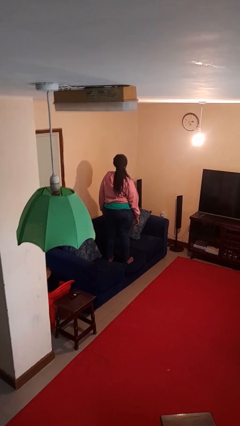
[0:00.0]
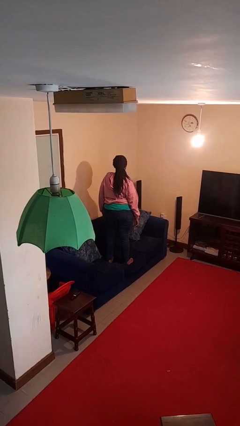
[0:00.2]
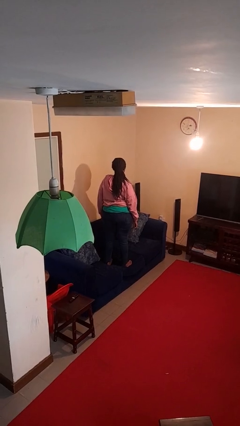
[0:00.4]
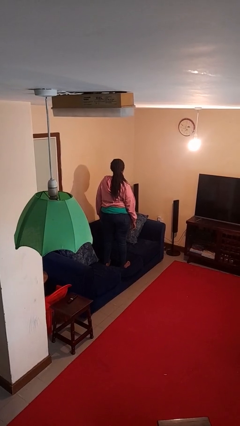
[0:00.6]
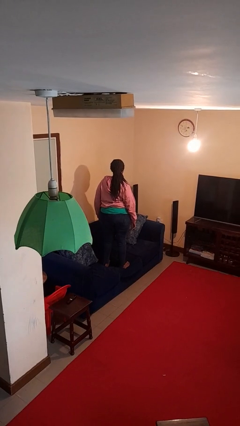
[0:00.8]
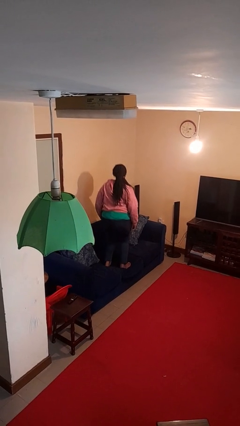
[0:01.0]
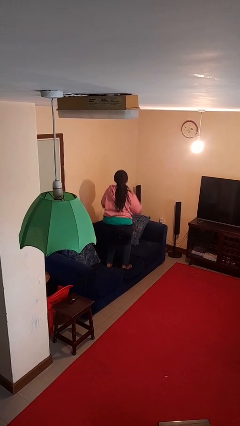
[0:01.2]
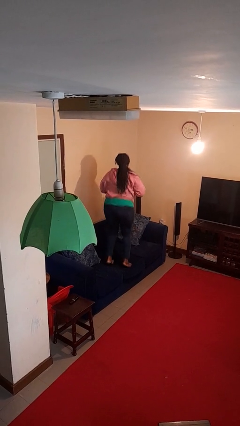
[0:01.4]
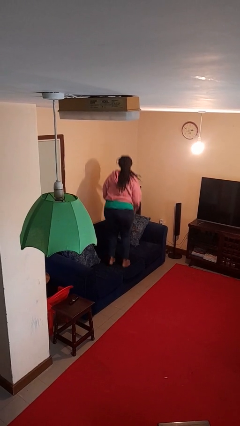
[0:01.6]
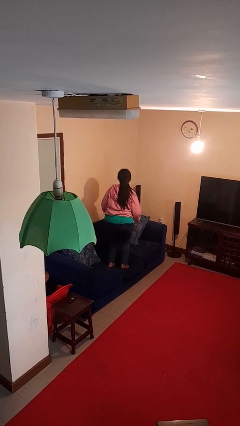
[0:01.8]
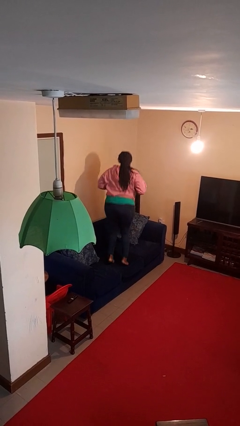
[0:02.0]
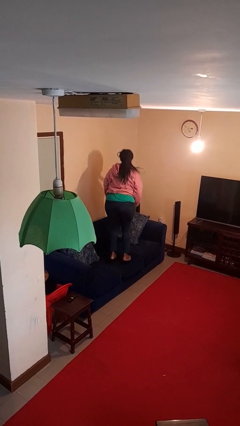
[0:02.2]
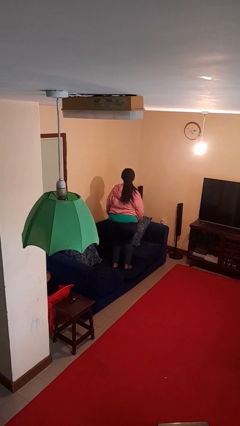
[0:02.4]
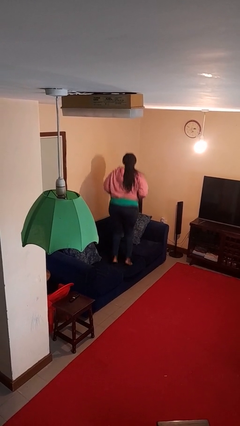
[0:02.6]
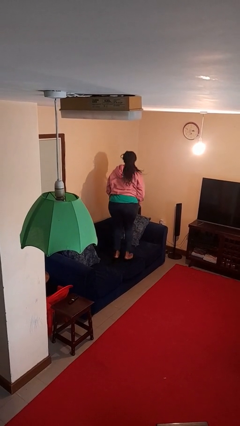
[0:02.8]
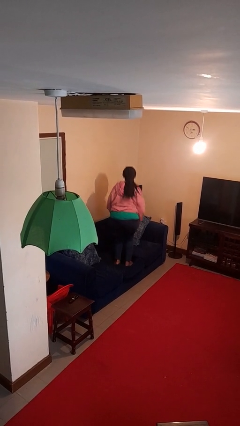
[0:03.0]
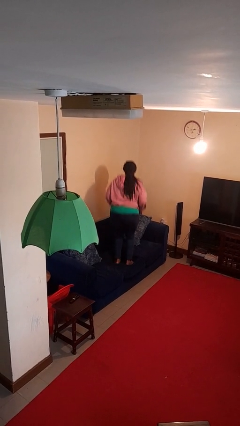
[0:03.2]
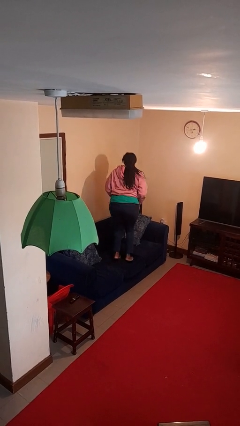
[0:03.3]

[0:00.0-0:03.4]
person jumps on couch

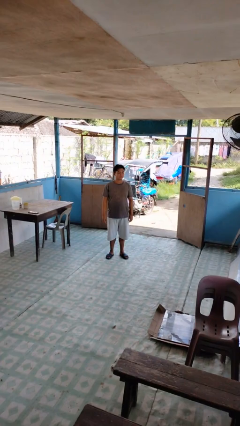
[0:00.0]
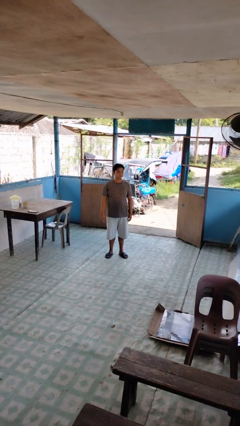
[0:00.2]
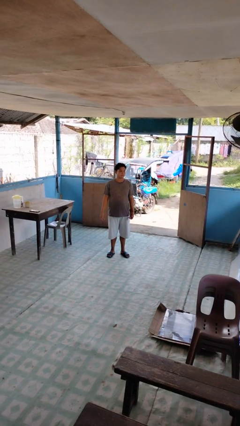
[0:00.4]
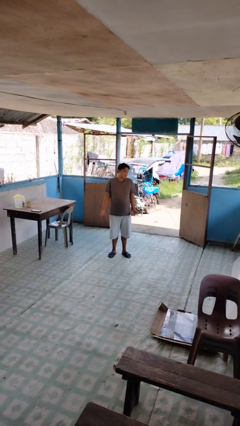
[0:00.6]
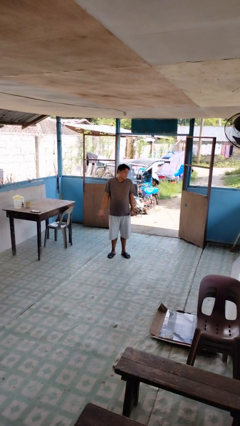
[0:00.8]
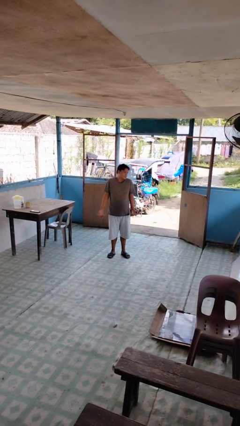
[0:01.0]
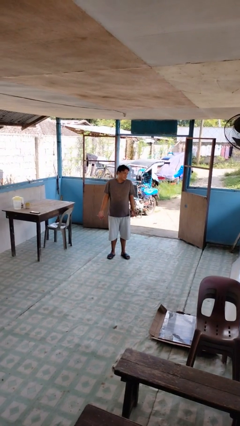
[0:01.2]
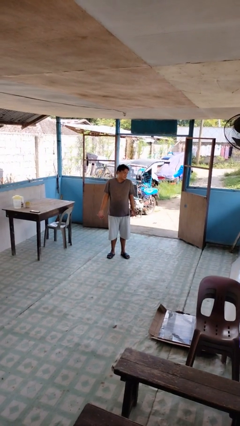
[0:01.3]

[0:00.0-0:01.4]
person shrugs

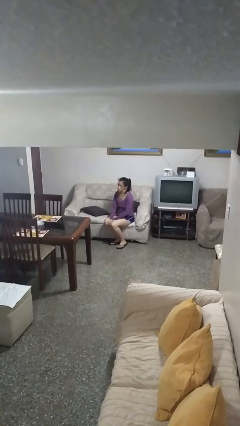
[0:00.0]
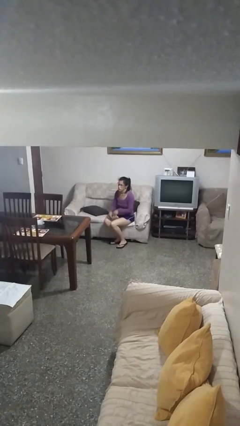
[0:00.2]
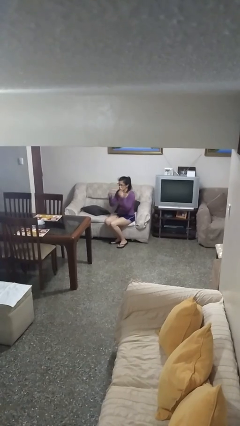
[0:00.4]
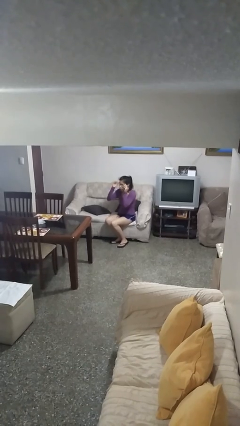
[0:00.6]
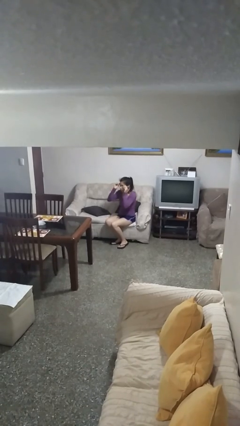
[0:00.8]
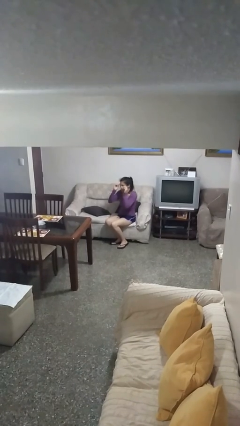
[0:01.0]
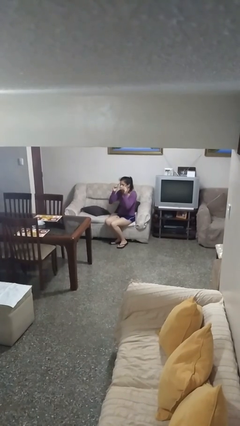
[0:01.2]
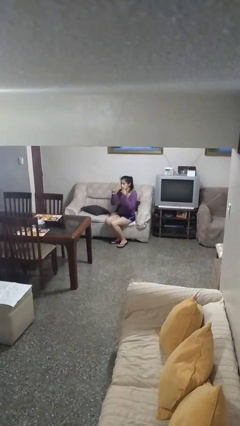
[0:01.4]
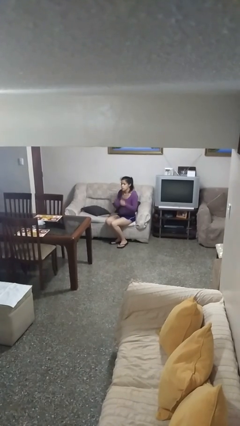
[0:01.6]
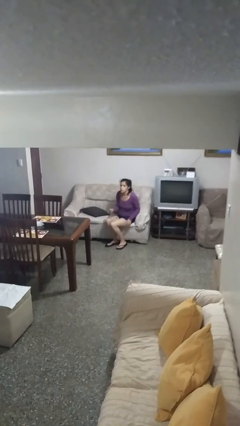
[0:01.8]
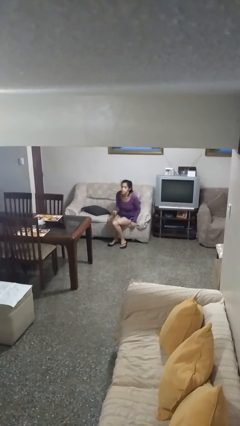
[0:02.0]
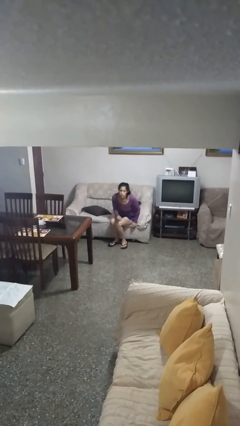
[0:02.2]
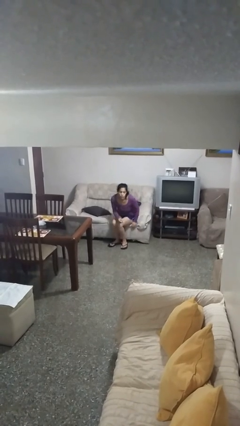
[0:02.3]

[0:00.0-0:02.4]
person takes off glasses

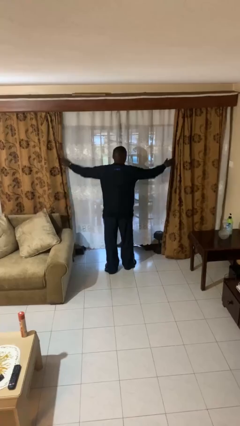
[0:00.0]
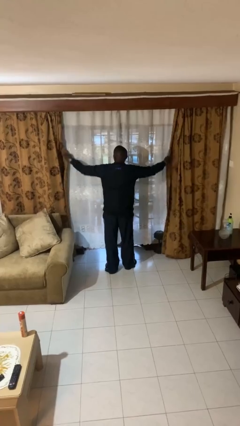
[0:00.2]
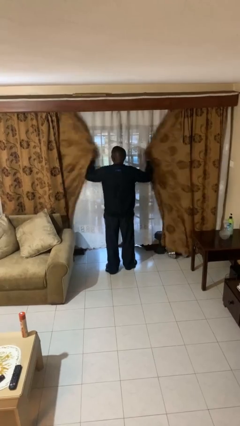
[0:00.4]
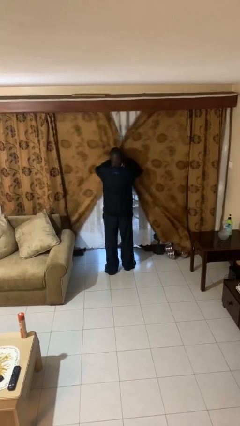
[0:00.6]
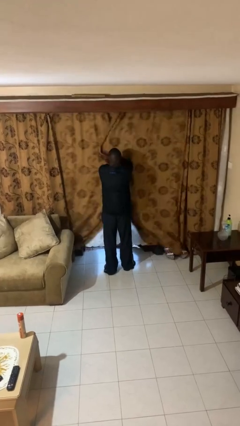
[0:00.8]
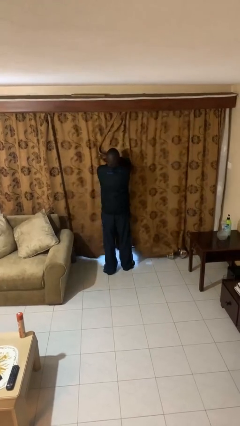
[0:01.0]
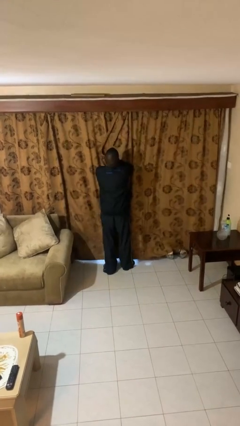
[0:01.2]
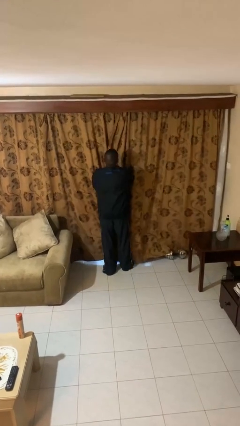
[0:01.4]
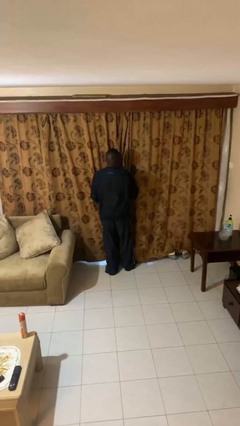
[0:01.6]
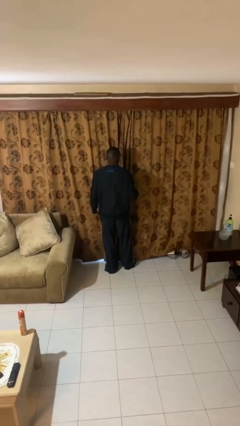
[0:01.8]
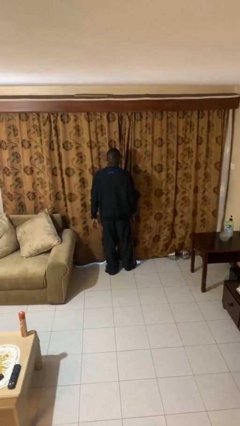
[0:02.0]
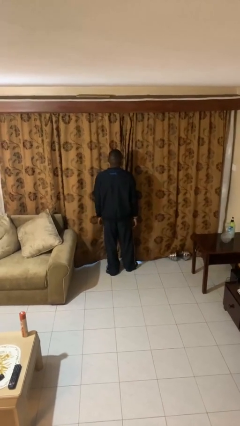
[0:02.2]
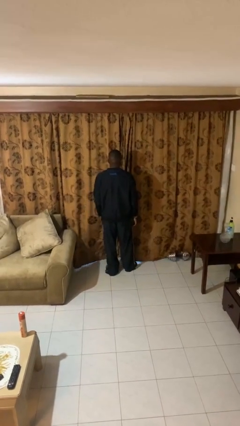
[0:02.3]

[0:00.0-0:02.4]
person closes curtains

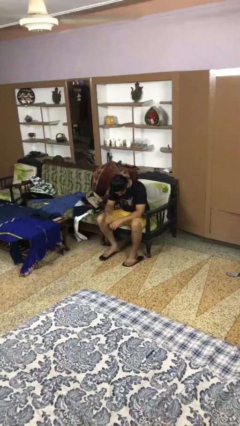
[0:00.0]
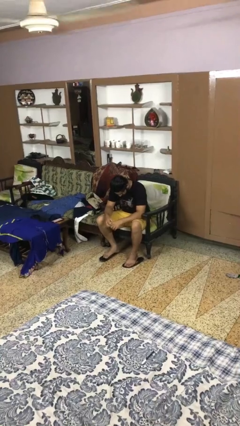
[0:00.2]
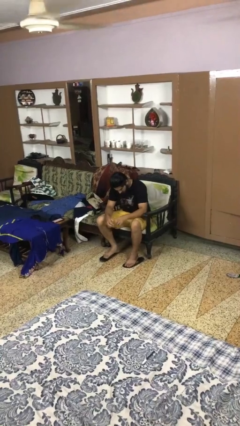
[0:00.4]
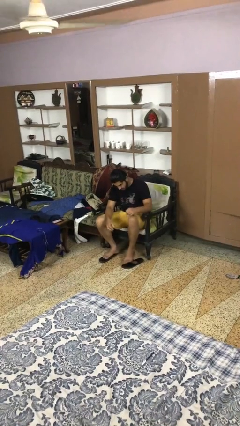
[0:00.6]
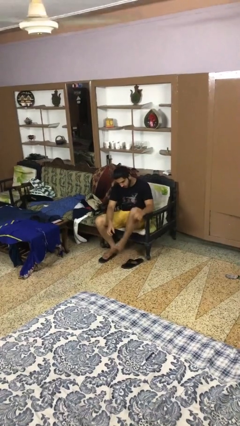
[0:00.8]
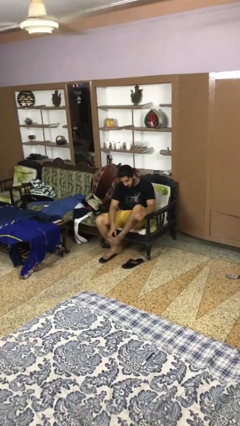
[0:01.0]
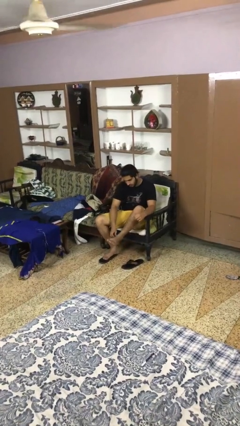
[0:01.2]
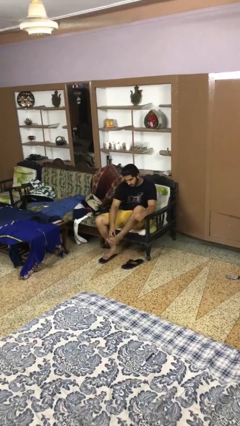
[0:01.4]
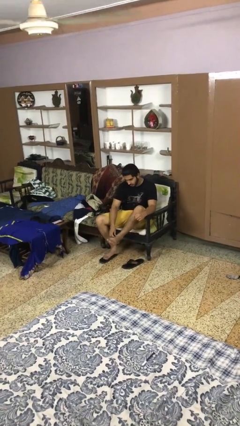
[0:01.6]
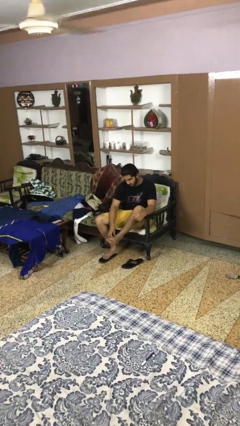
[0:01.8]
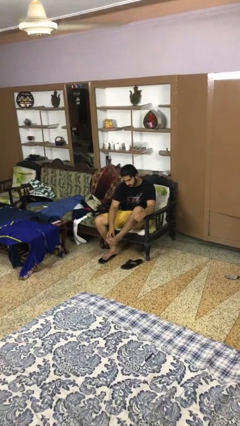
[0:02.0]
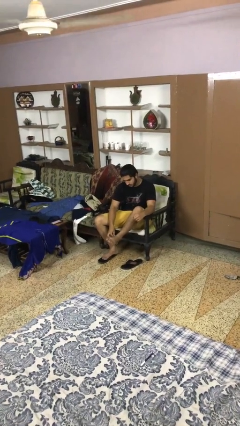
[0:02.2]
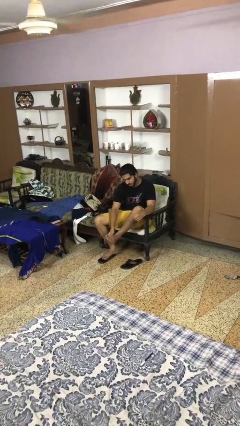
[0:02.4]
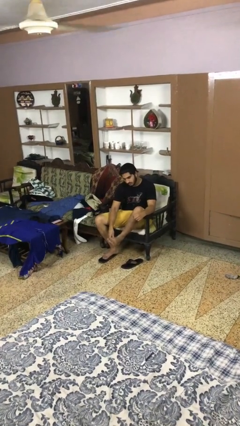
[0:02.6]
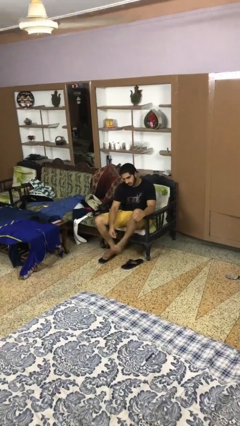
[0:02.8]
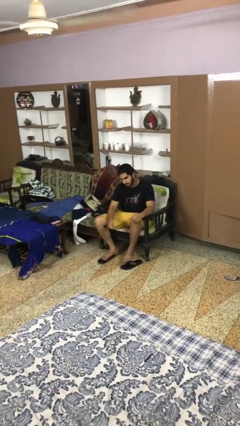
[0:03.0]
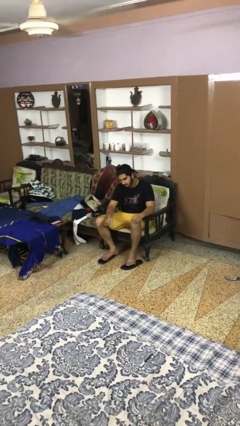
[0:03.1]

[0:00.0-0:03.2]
person rubs foot

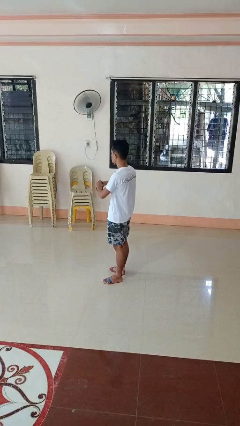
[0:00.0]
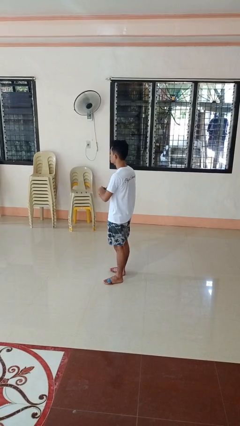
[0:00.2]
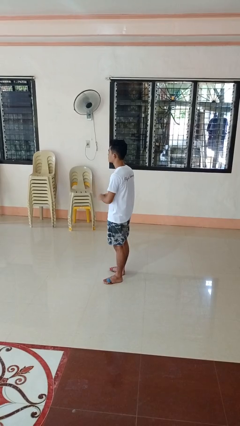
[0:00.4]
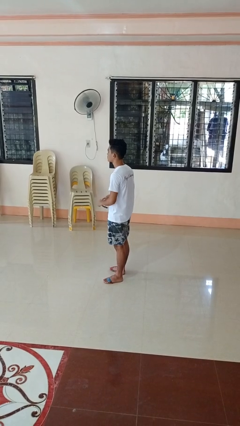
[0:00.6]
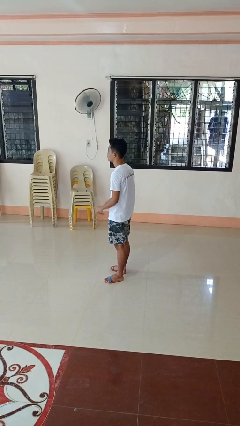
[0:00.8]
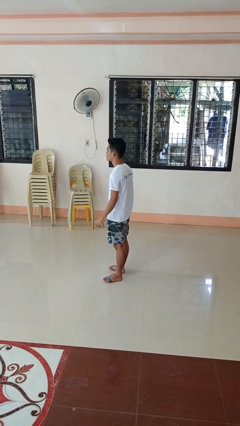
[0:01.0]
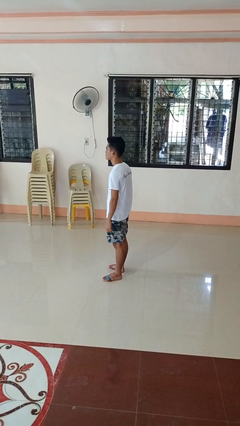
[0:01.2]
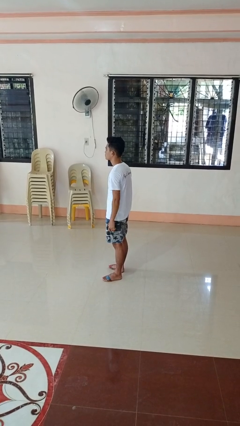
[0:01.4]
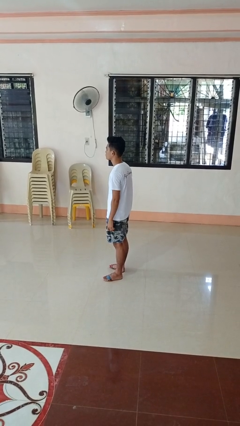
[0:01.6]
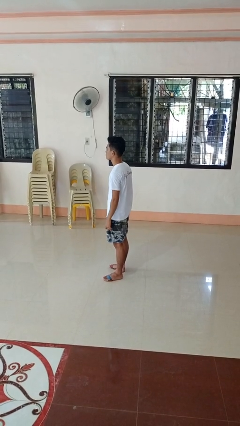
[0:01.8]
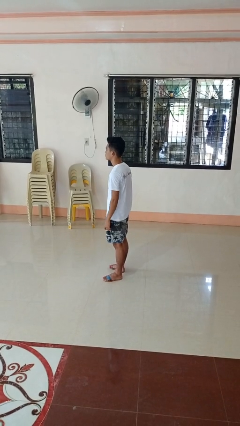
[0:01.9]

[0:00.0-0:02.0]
person takes off wristwatch

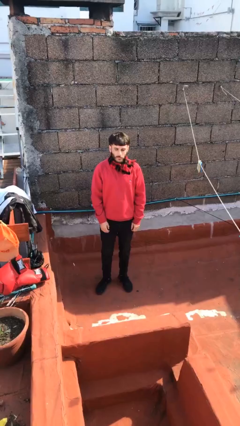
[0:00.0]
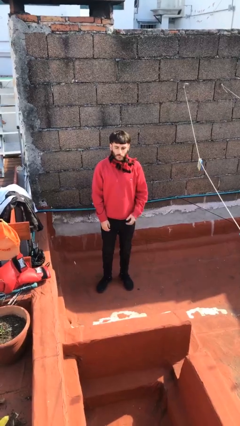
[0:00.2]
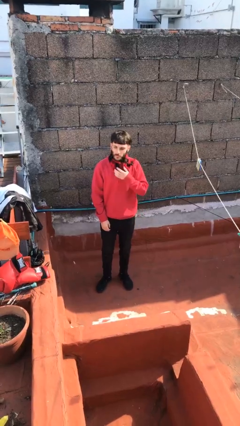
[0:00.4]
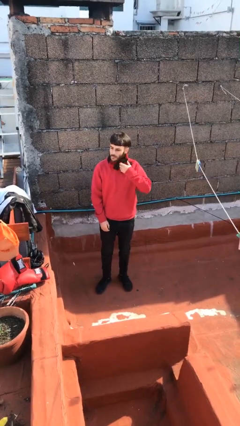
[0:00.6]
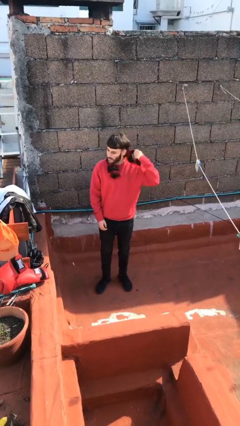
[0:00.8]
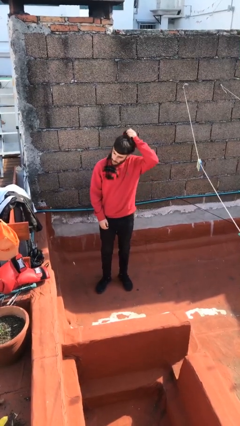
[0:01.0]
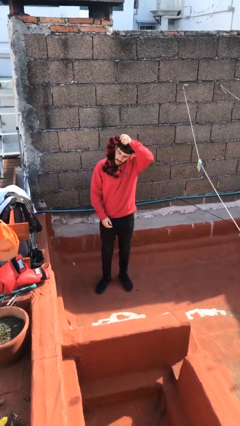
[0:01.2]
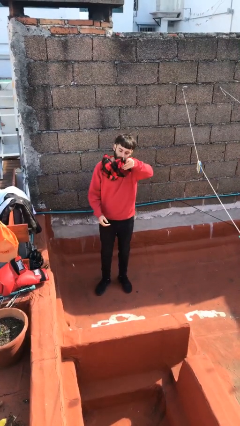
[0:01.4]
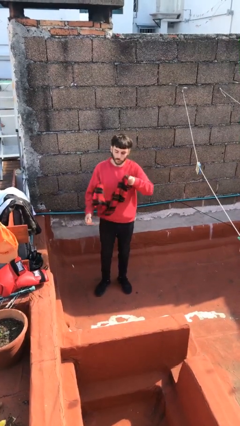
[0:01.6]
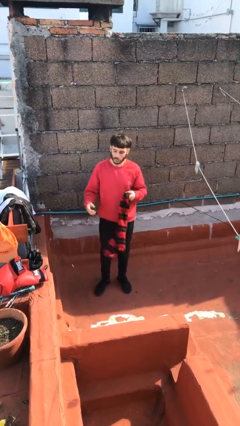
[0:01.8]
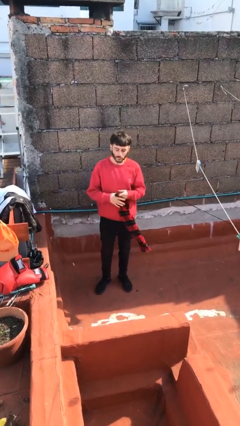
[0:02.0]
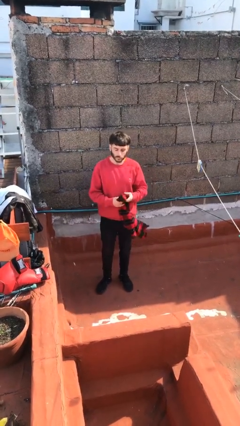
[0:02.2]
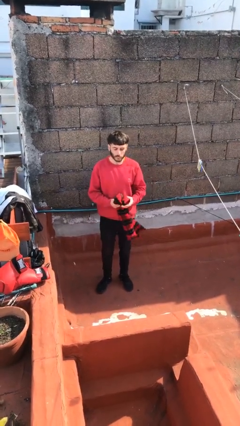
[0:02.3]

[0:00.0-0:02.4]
person takes off scarf
